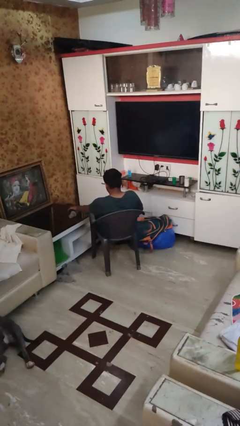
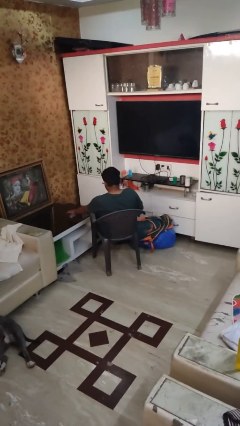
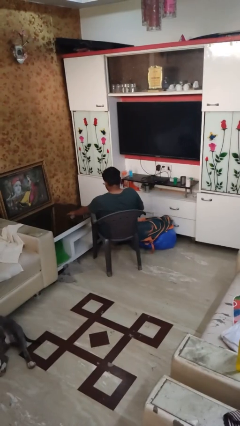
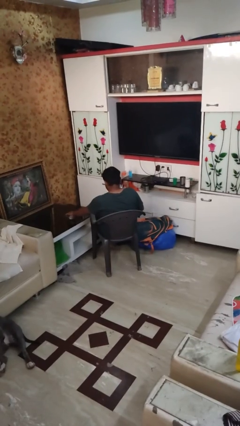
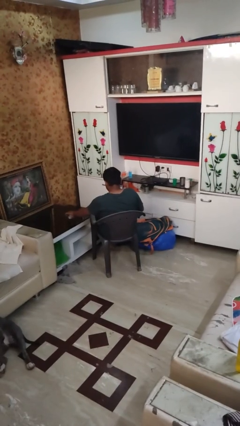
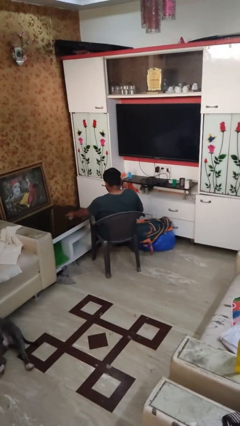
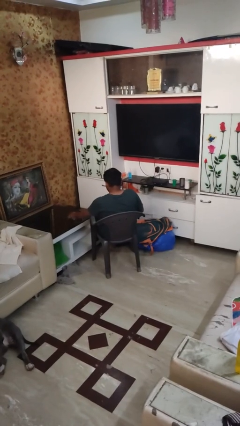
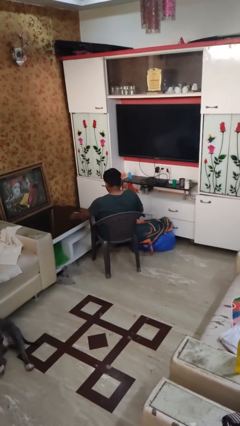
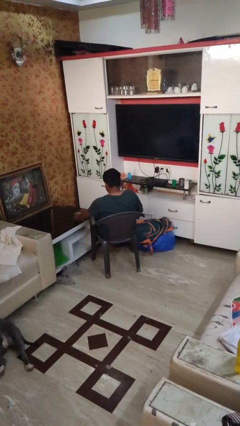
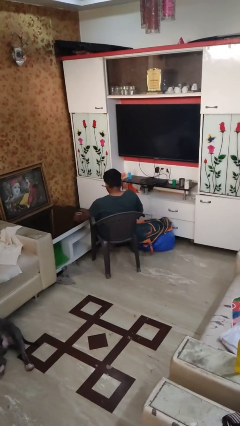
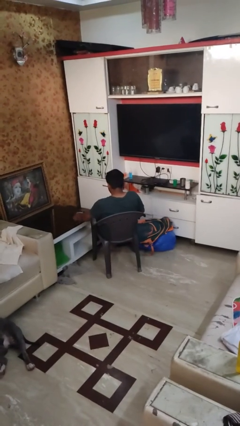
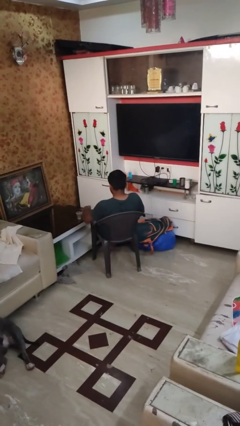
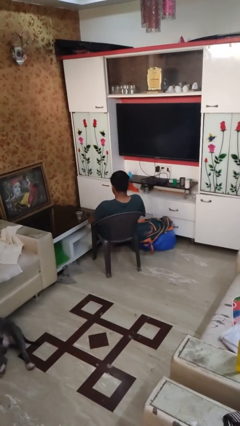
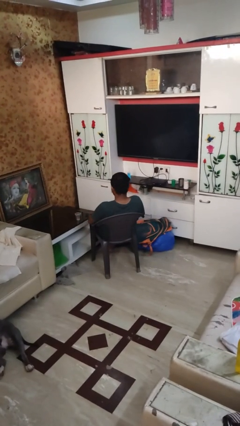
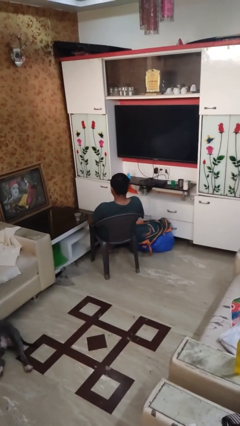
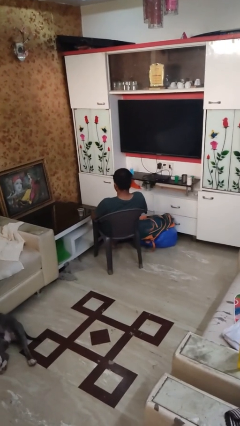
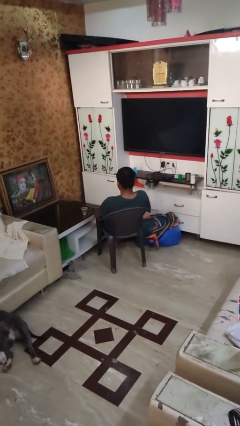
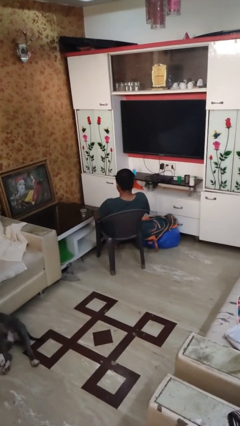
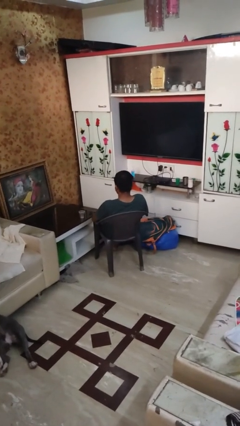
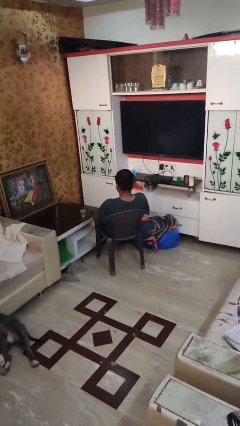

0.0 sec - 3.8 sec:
person sets upright glass

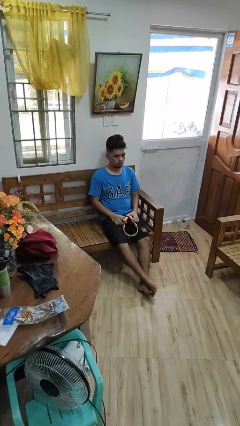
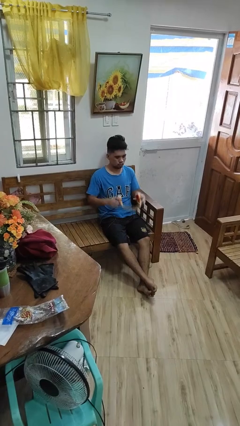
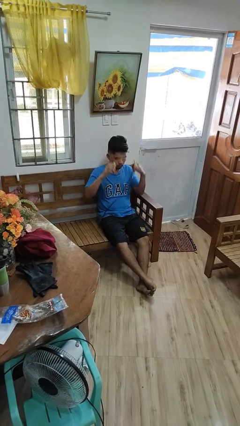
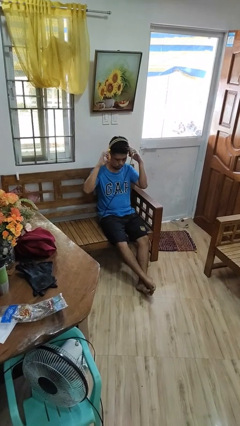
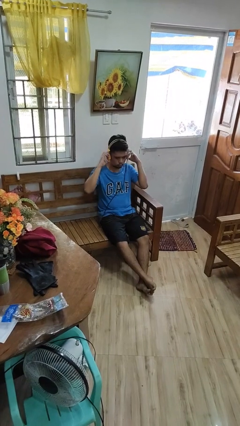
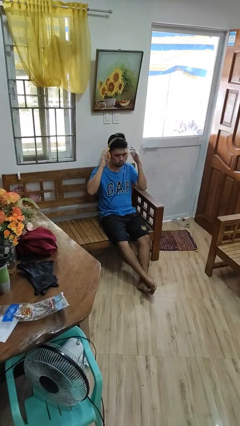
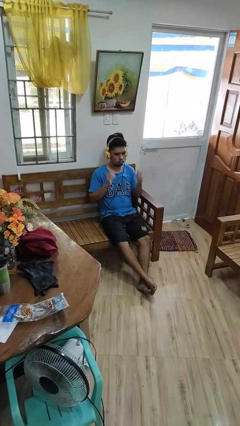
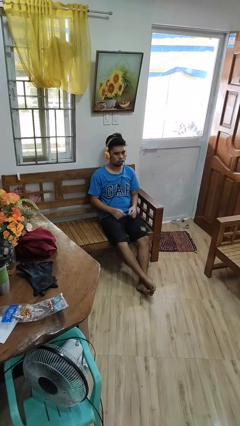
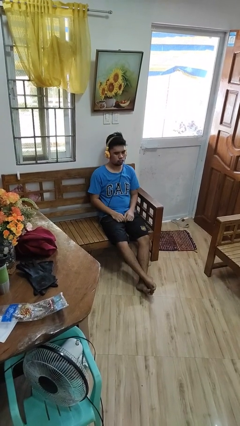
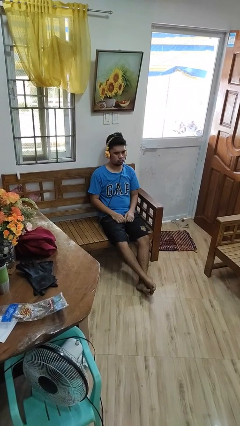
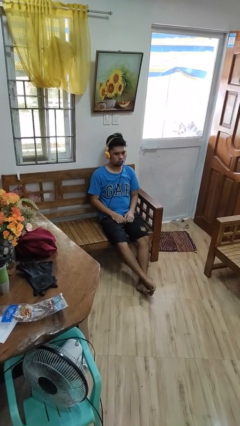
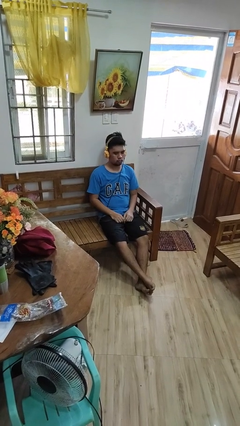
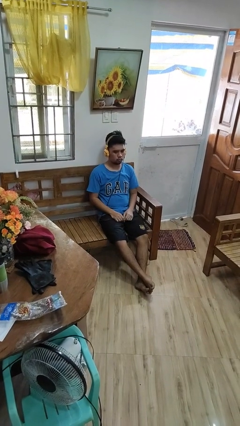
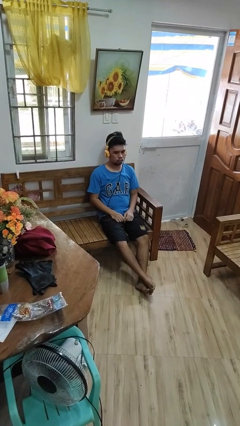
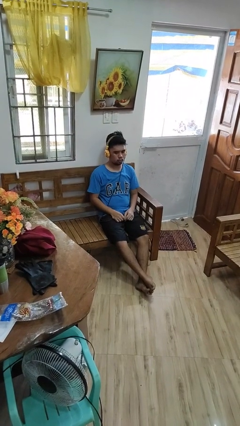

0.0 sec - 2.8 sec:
person puts on headphones

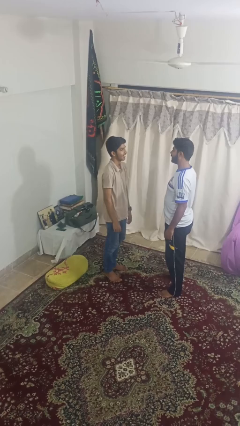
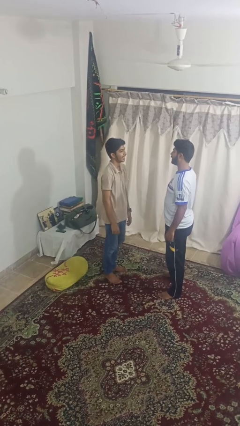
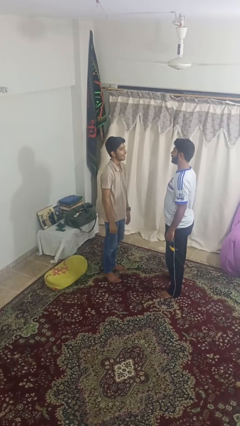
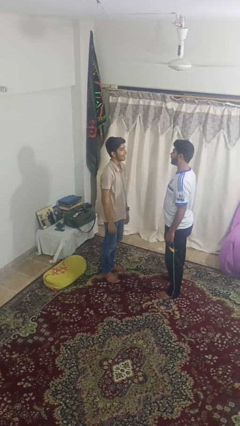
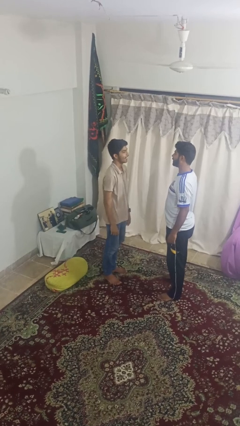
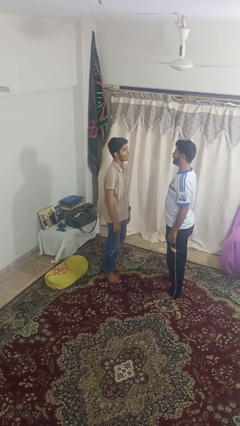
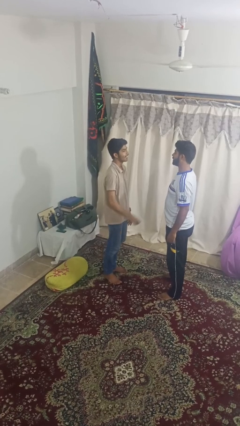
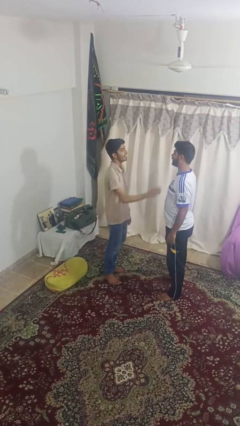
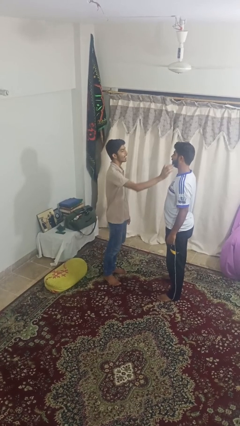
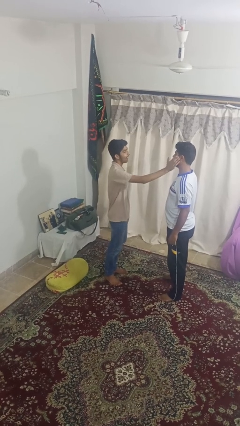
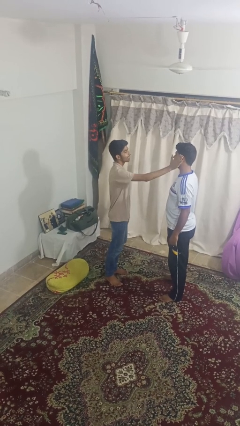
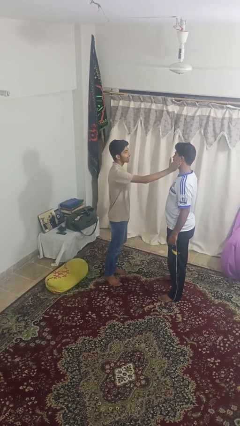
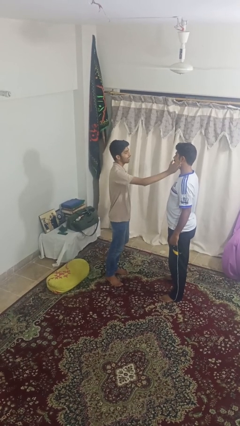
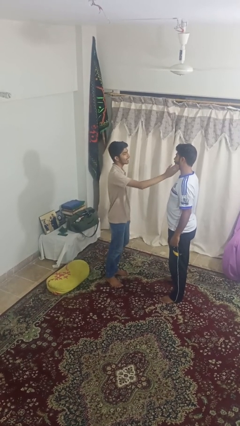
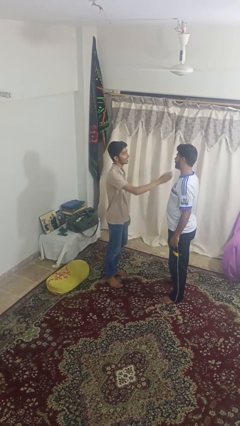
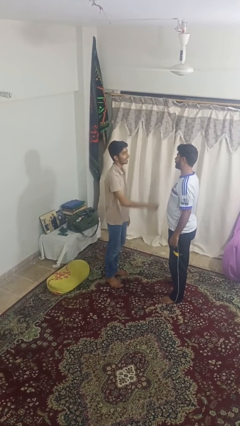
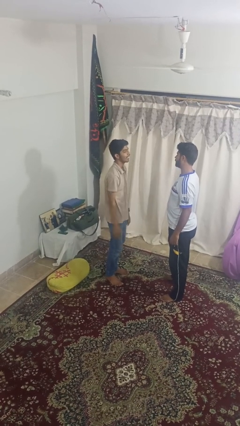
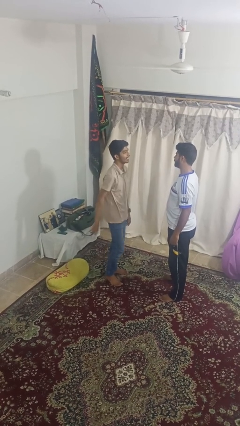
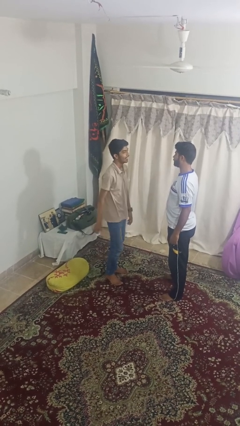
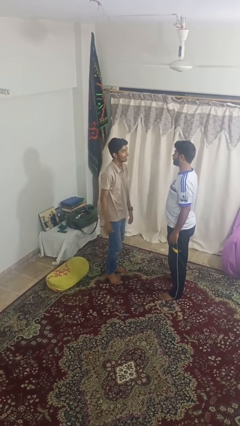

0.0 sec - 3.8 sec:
person touches face of person

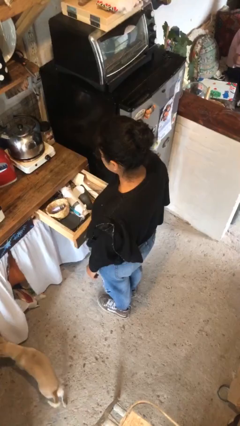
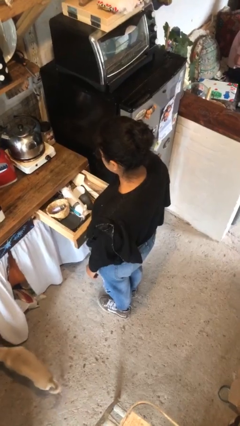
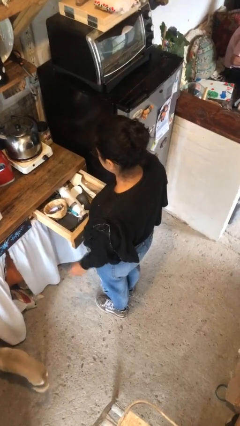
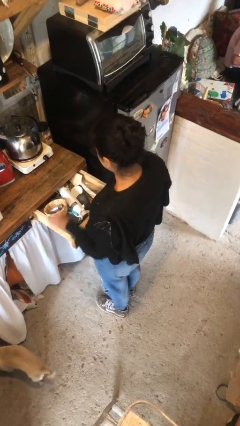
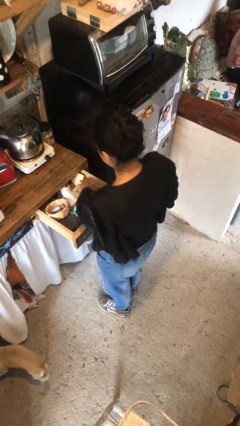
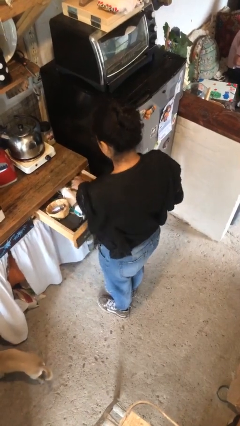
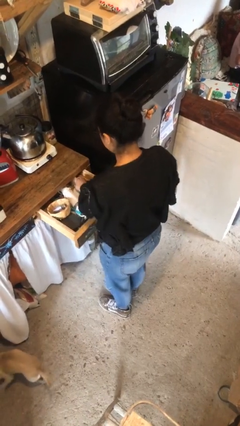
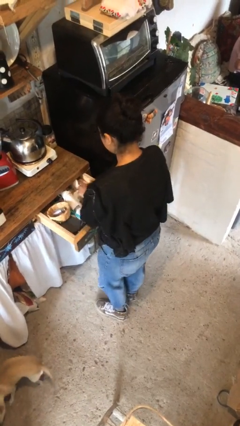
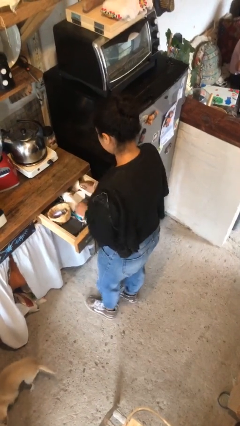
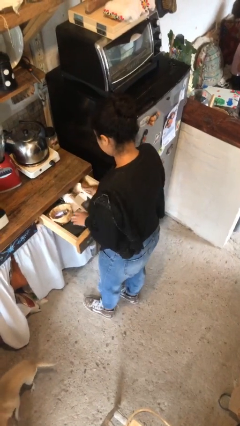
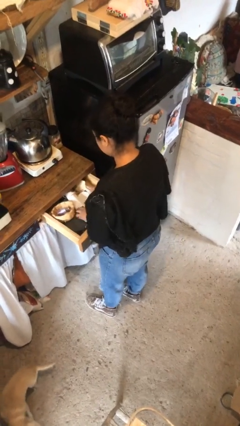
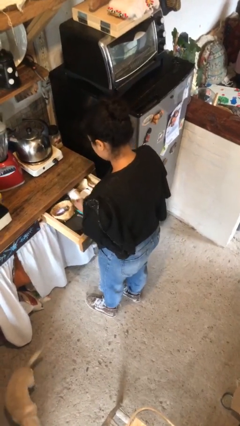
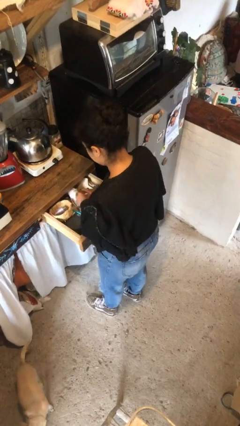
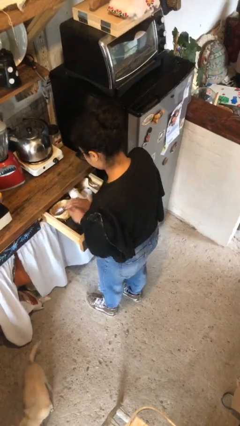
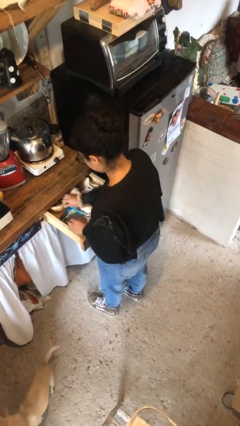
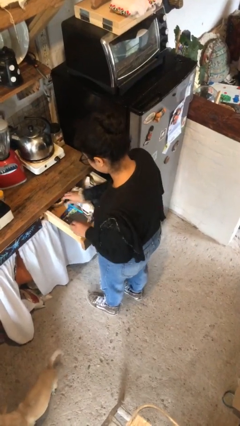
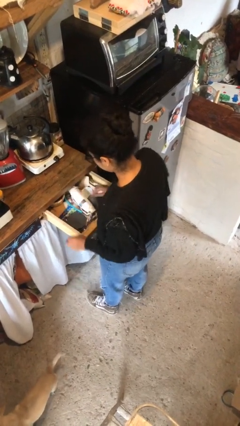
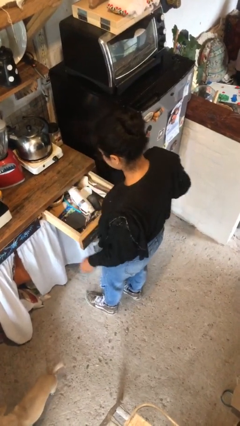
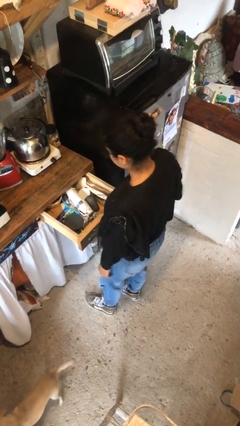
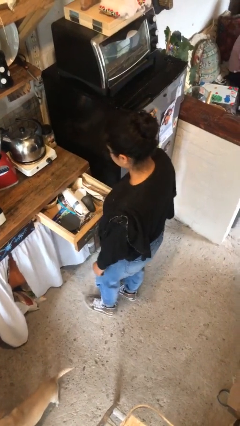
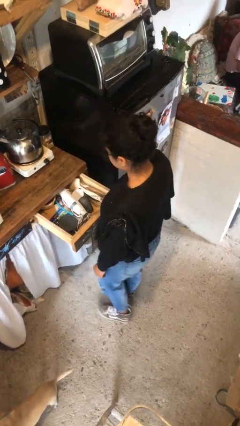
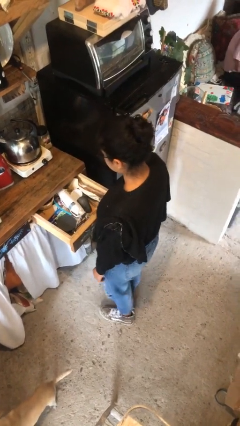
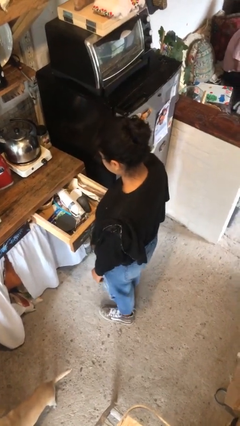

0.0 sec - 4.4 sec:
person searches in kitchen drawer

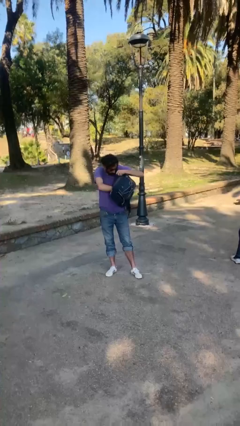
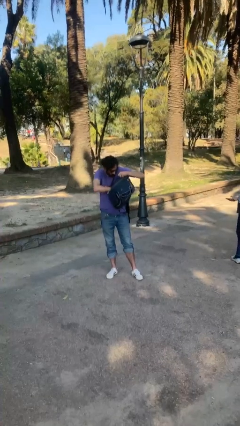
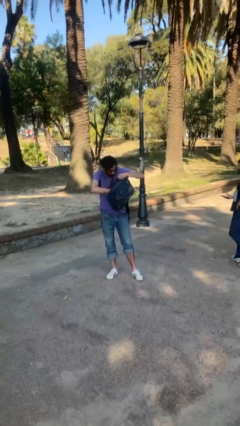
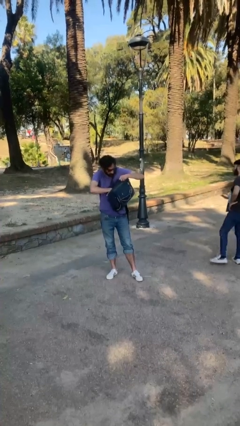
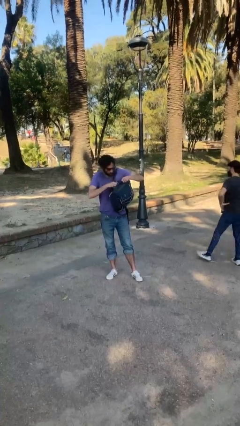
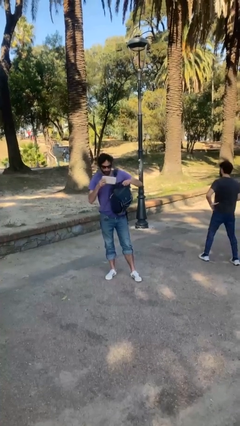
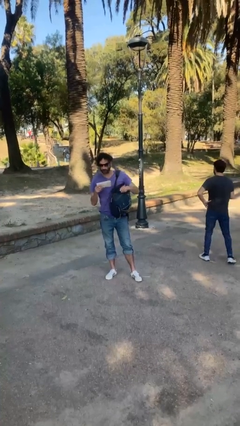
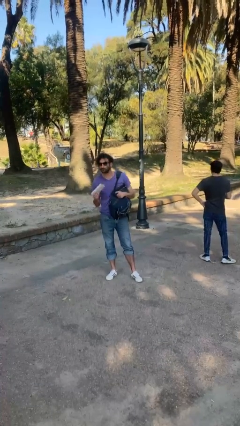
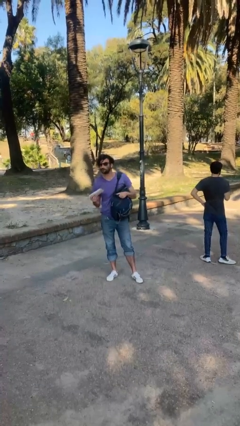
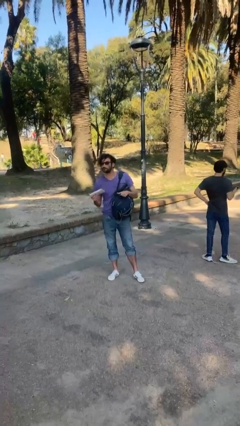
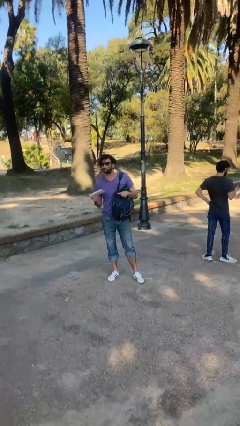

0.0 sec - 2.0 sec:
person takes object from backpack

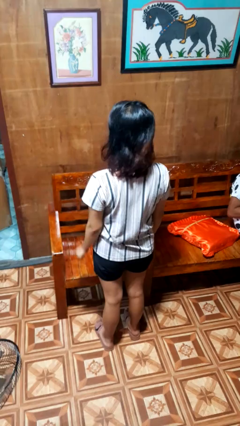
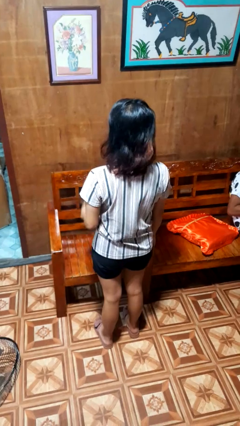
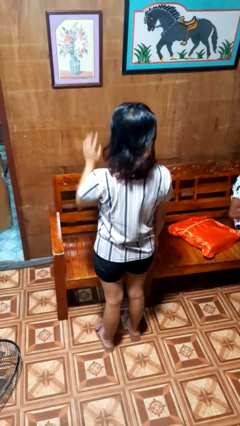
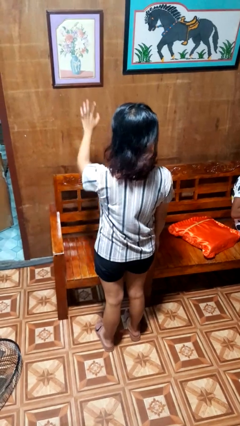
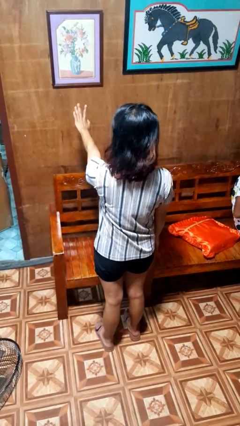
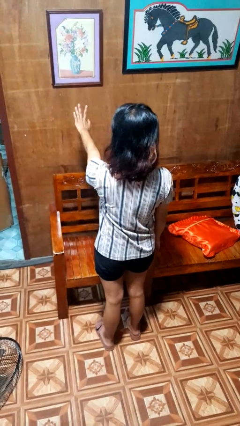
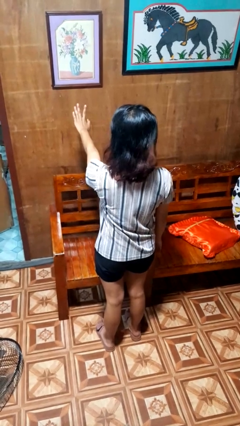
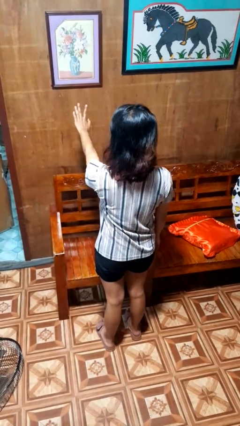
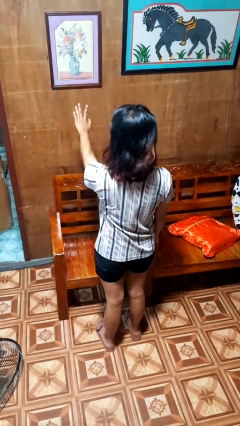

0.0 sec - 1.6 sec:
person gestures stop
